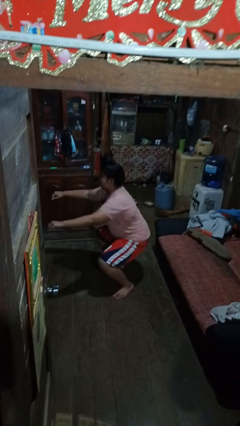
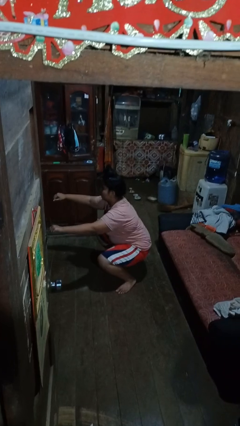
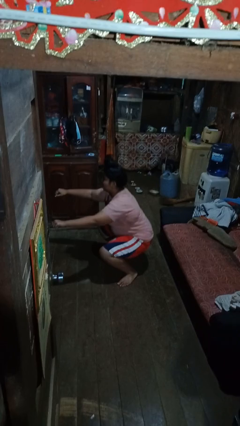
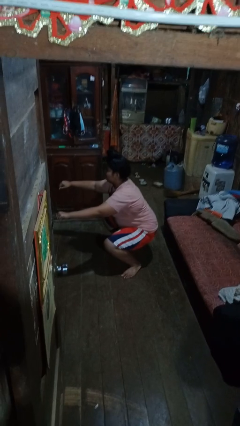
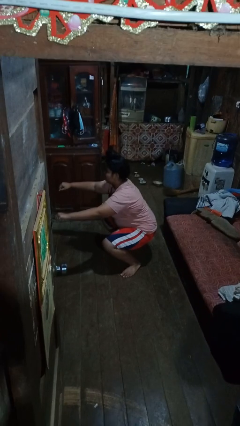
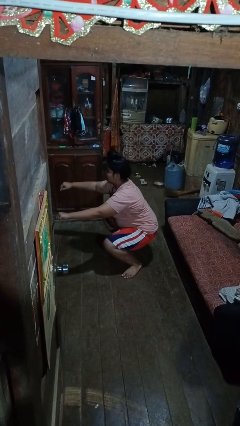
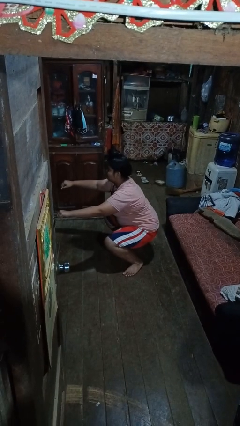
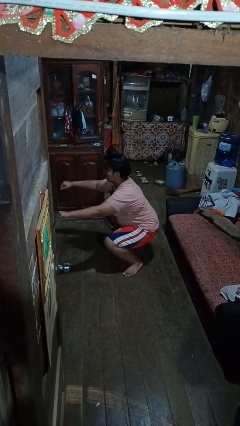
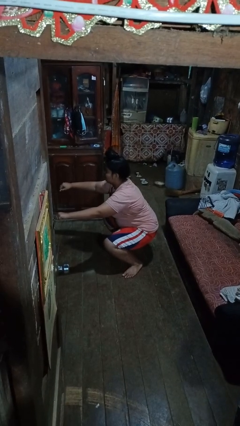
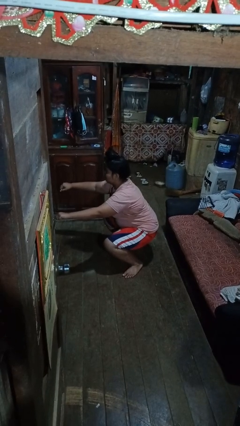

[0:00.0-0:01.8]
person squats

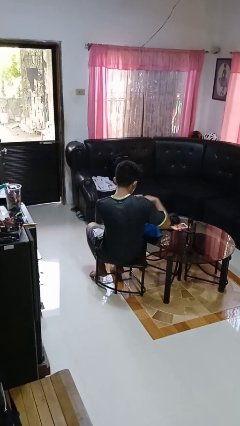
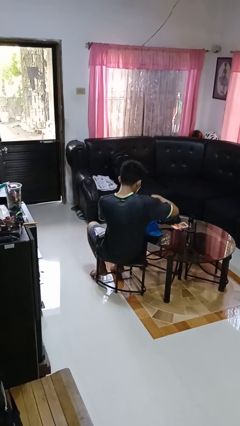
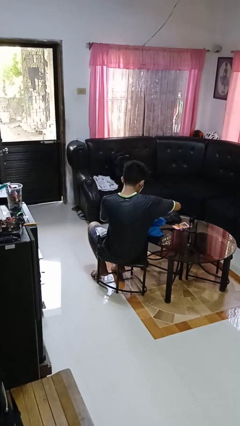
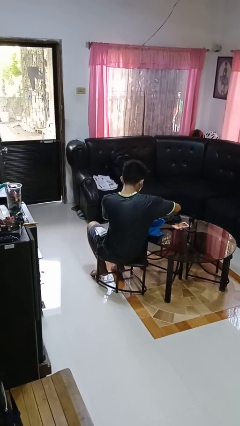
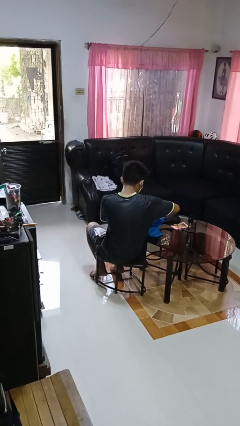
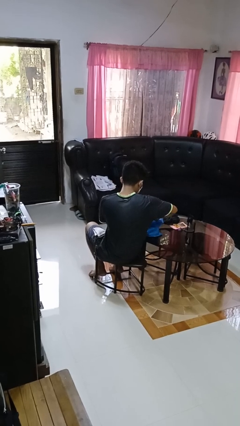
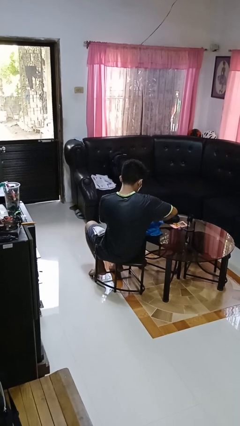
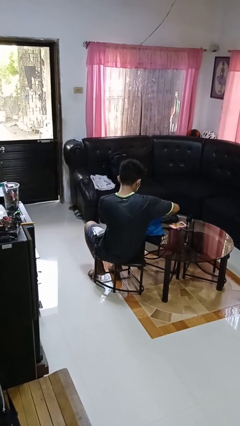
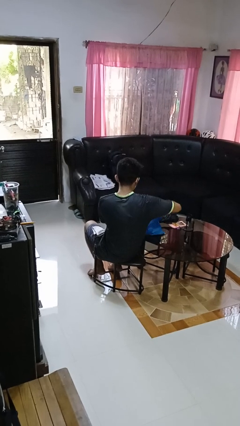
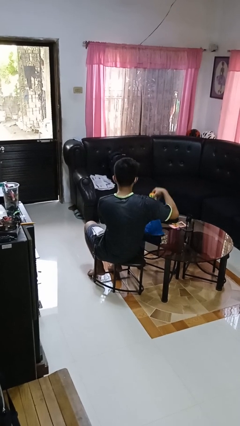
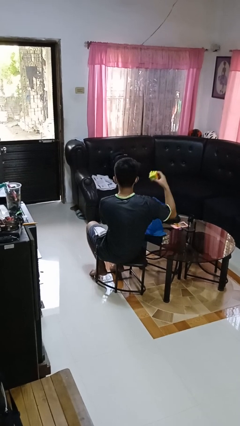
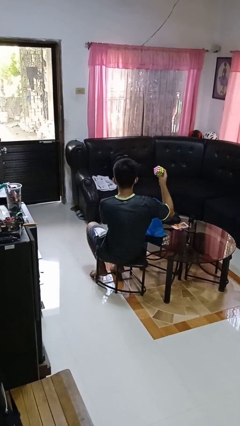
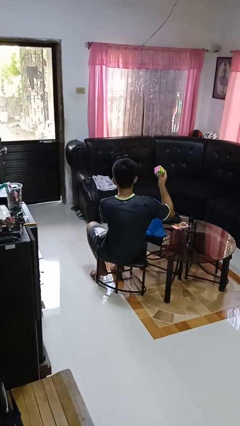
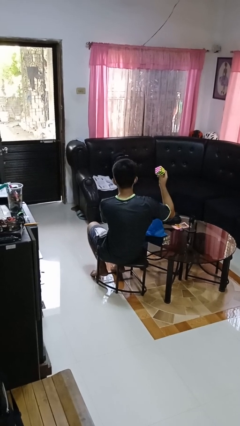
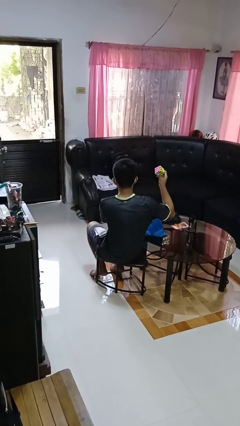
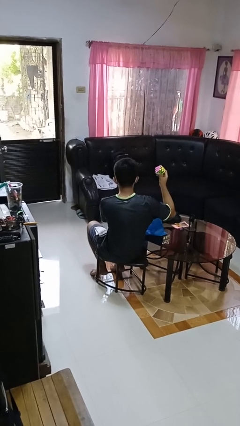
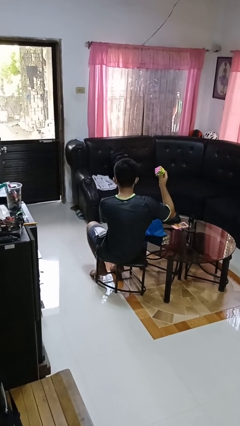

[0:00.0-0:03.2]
person takes object from bag

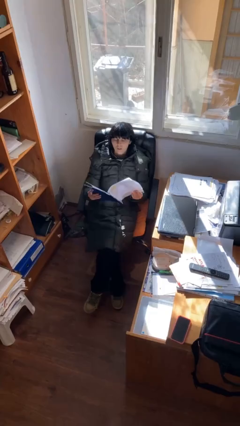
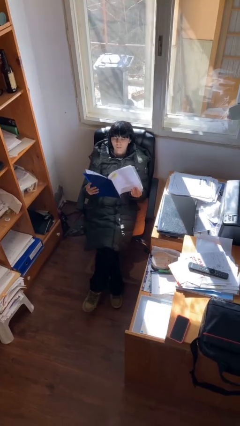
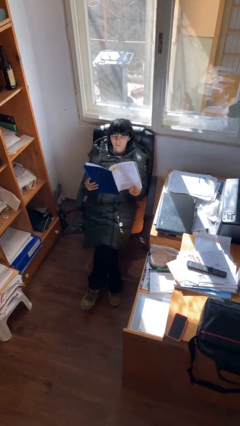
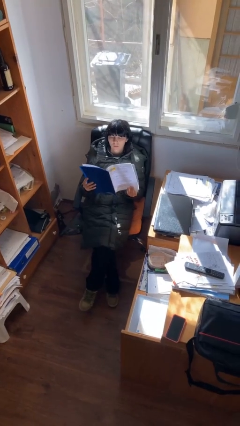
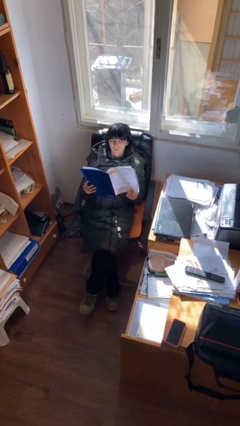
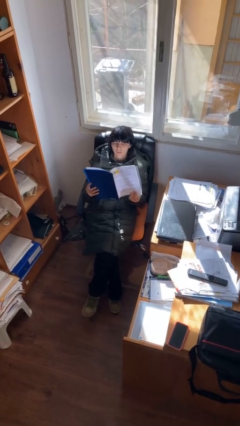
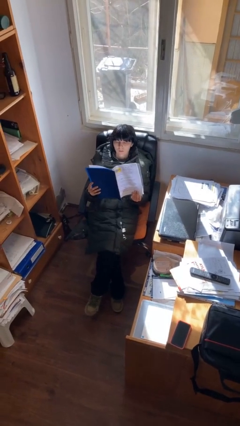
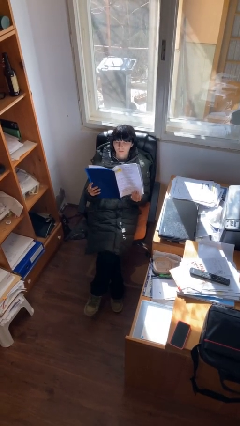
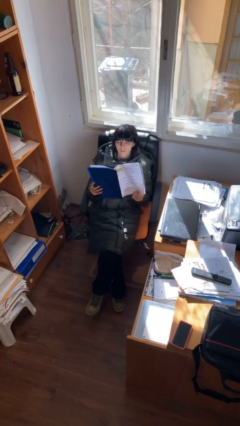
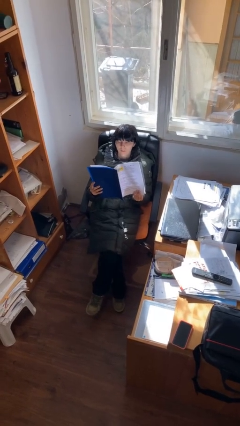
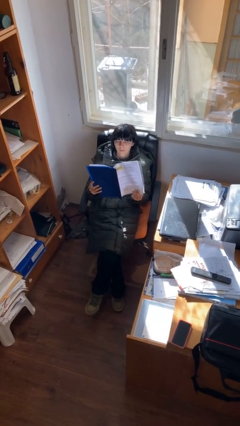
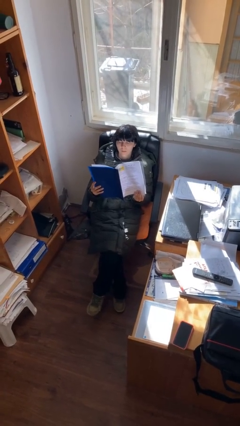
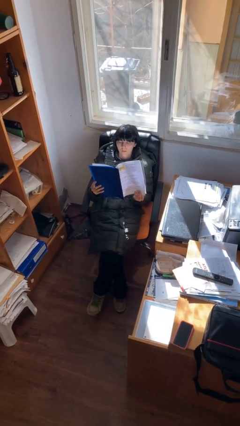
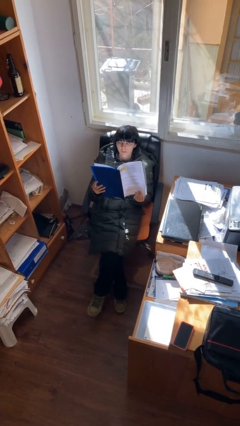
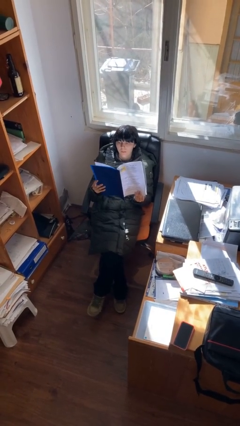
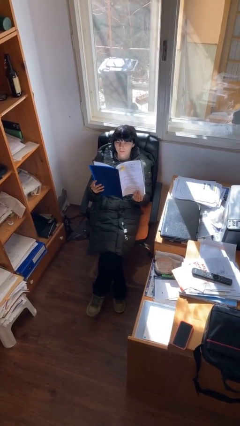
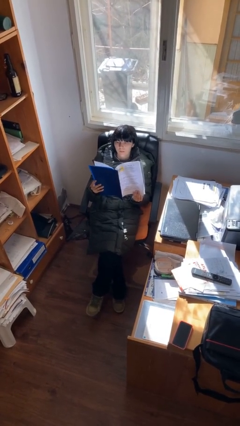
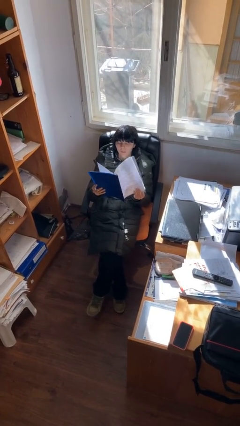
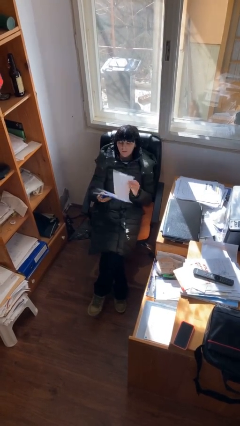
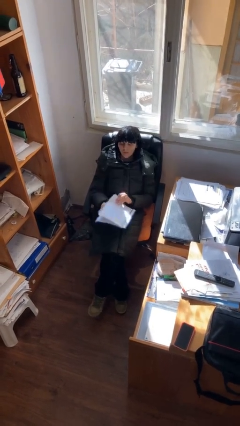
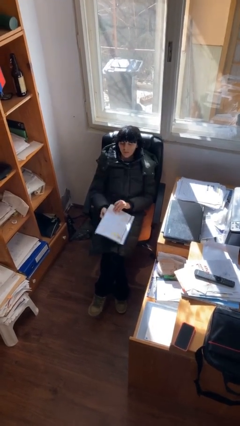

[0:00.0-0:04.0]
person reads document

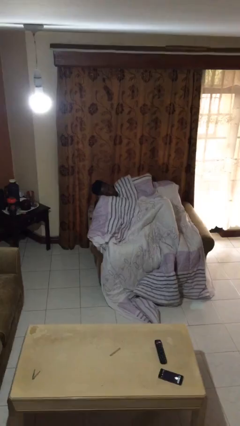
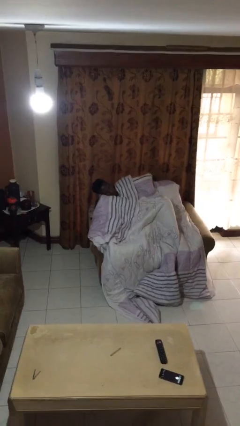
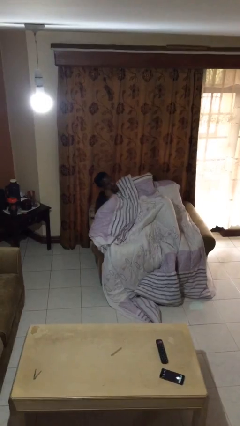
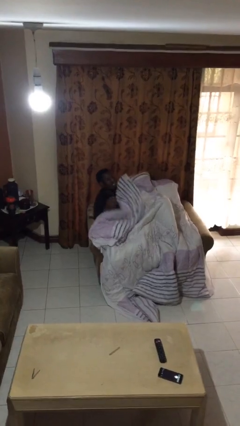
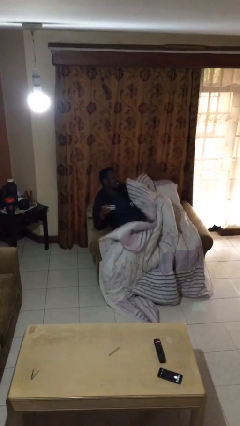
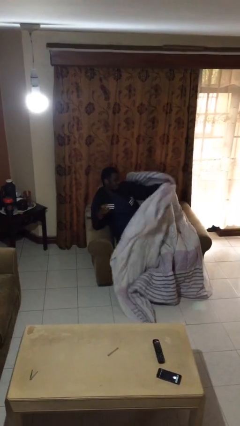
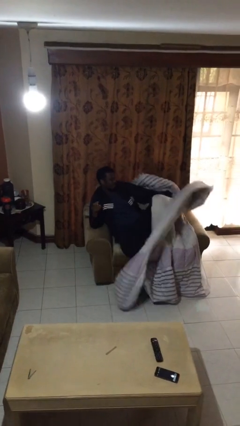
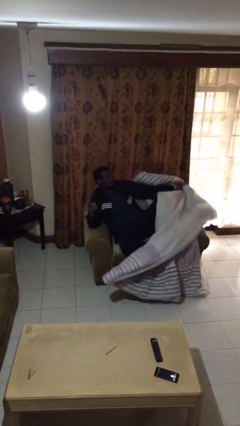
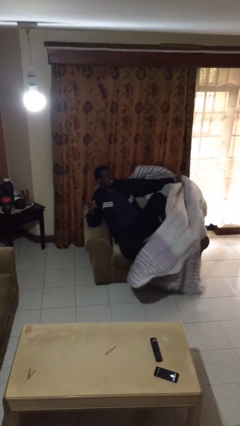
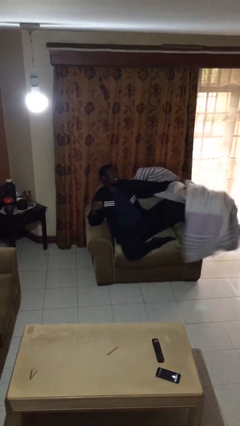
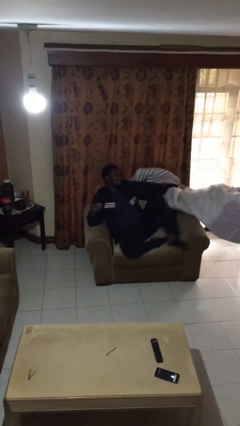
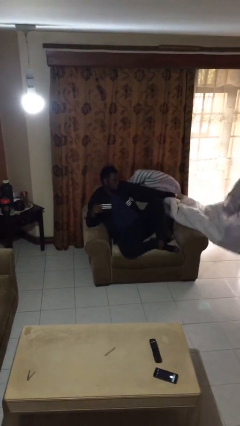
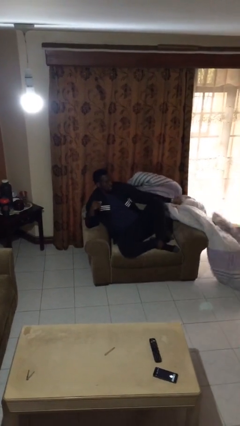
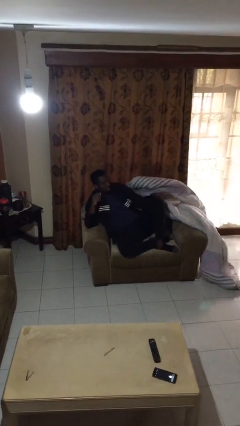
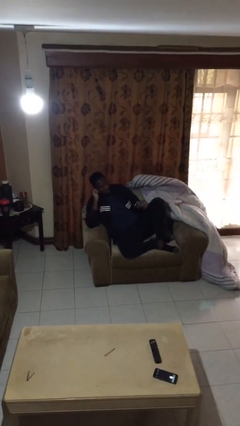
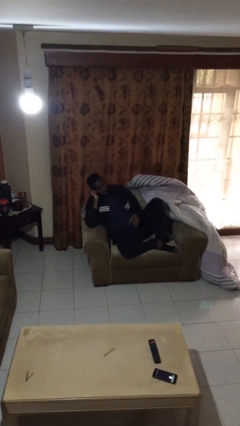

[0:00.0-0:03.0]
person uncovers with blanket

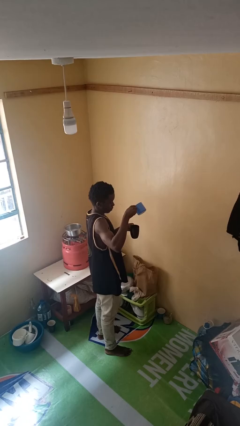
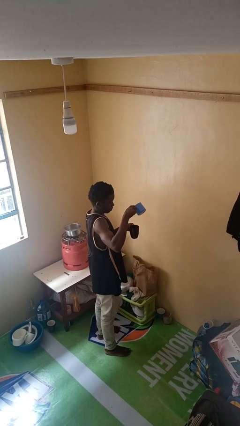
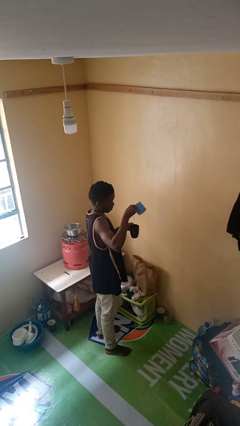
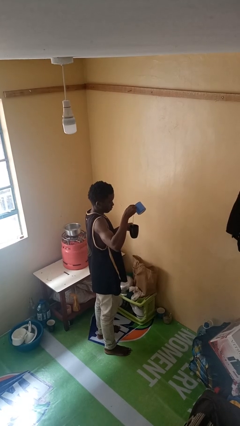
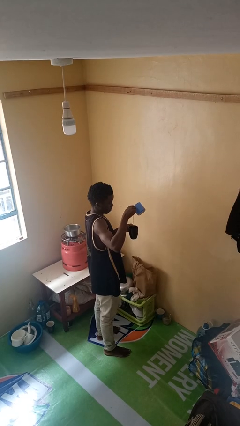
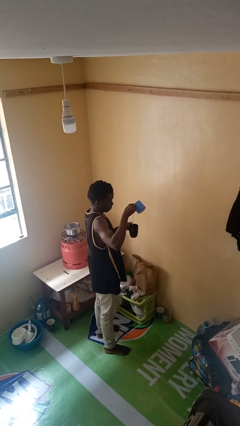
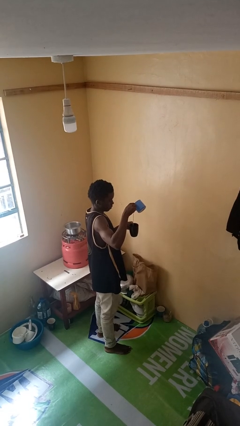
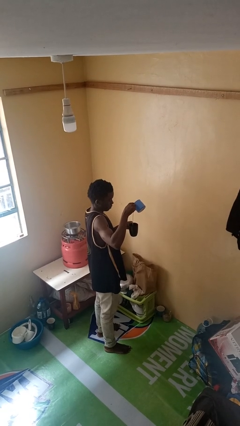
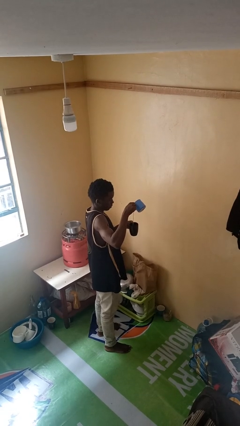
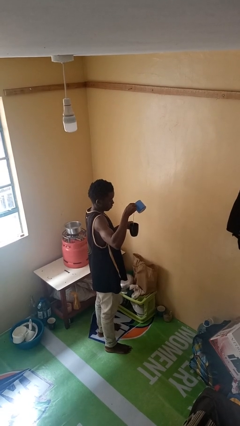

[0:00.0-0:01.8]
person pours coffee into mug

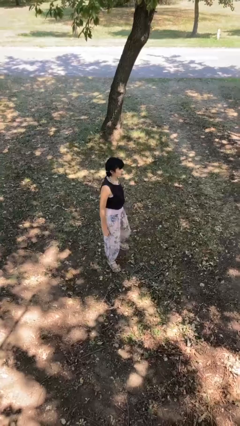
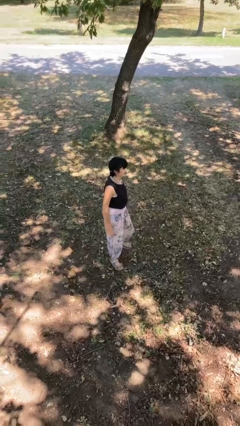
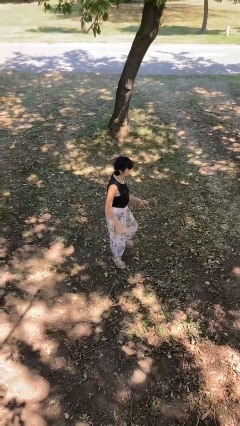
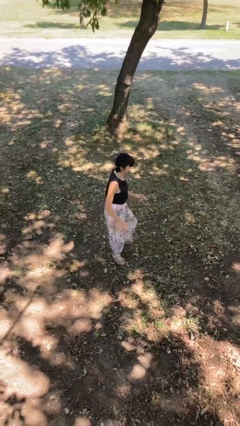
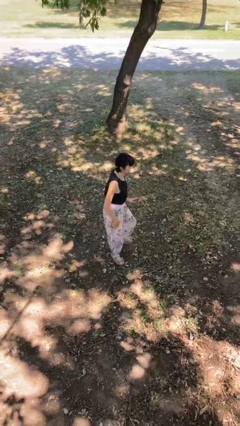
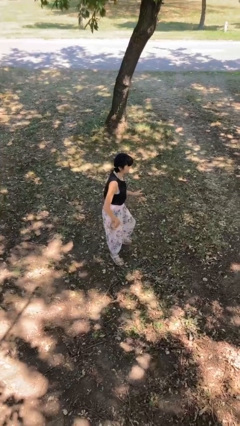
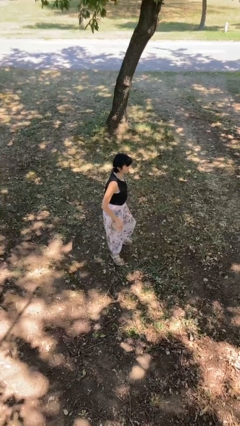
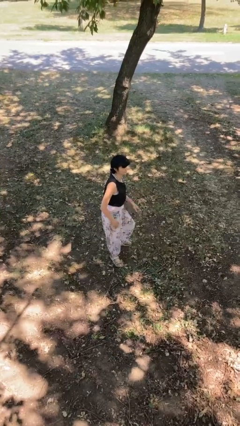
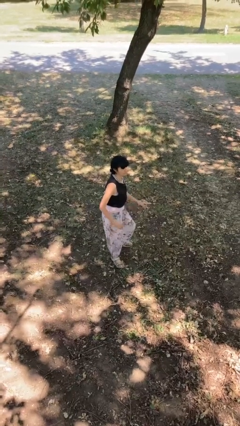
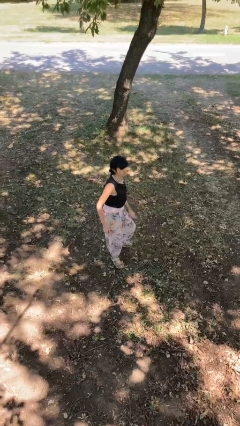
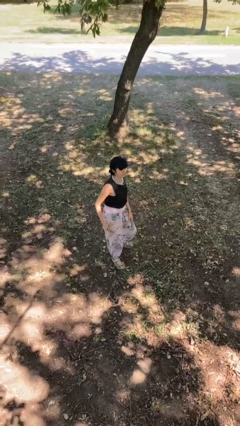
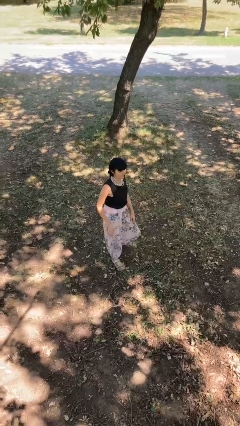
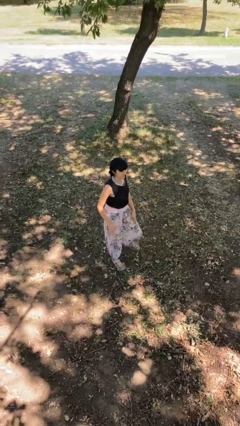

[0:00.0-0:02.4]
person slaps hands on thighs

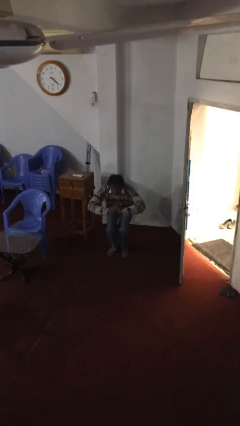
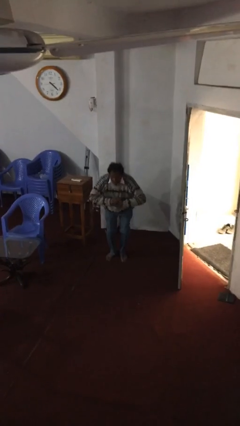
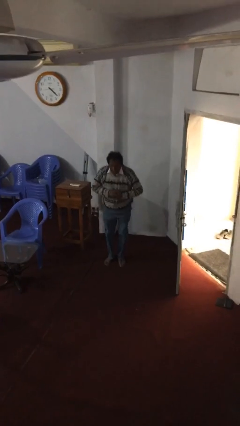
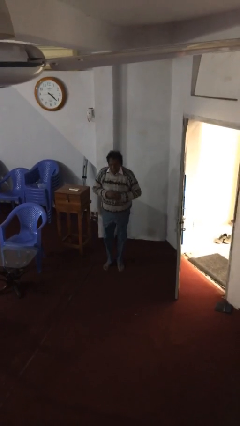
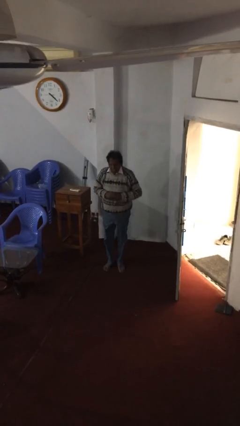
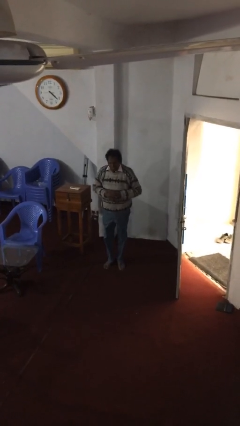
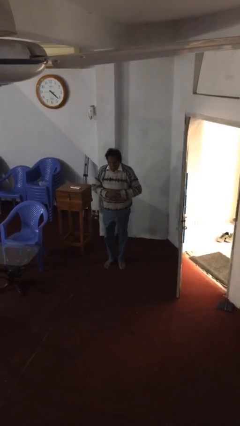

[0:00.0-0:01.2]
person stands up
